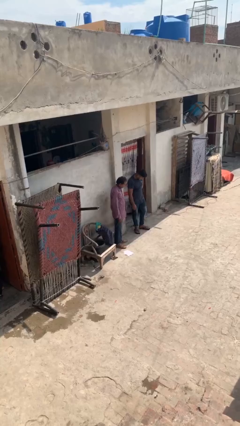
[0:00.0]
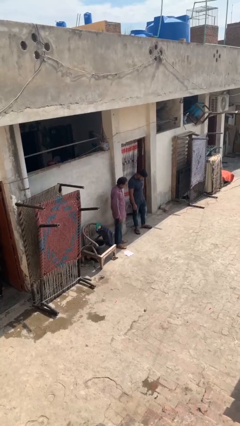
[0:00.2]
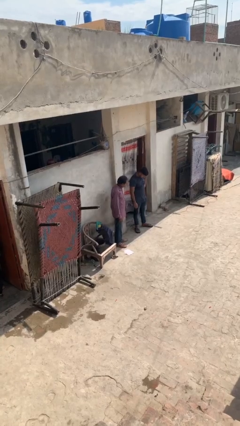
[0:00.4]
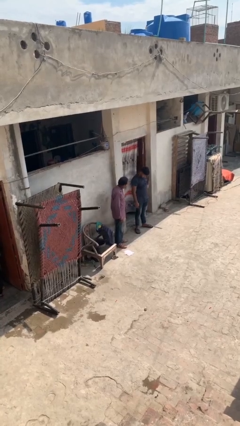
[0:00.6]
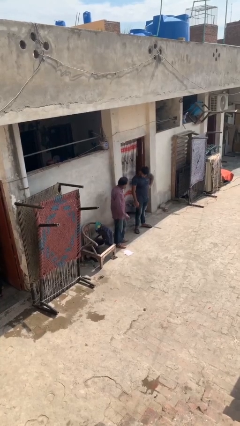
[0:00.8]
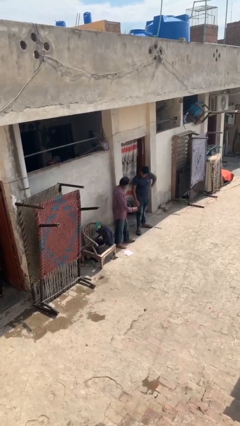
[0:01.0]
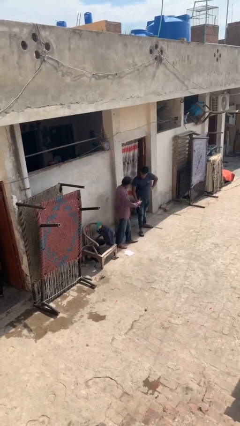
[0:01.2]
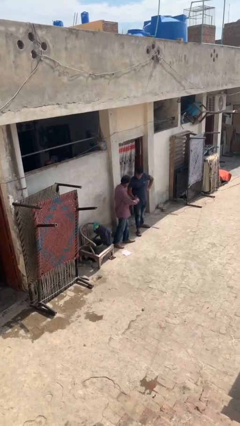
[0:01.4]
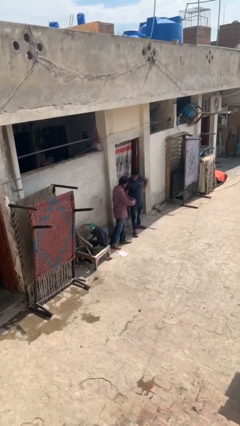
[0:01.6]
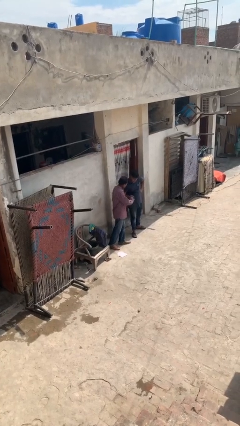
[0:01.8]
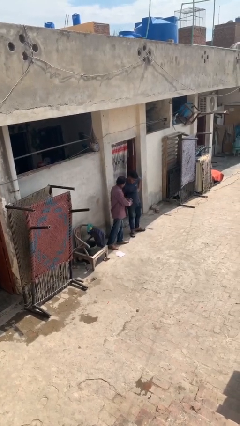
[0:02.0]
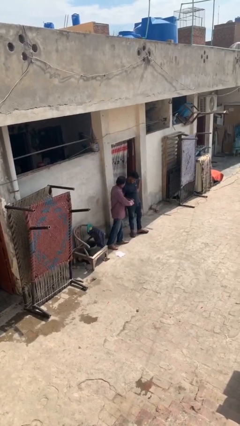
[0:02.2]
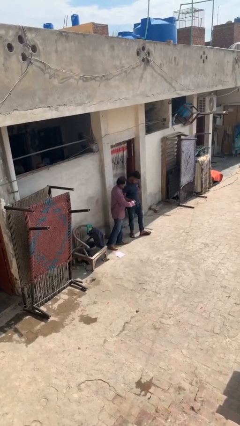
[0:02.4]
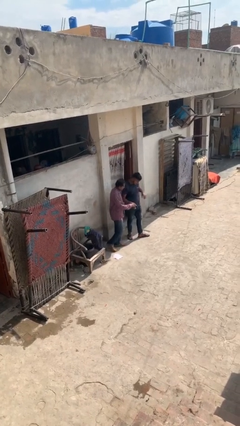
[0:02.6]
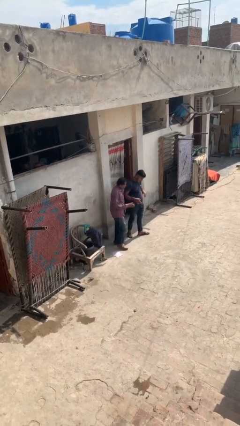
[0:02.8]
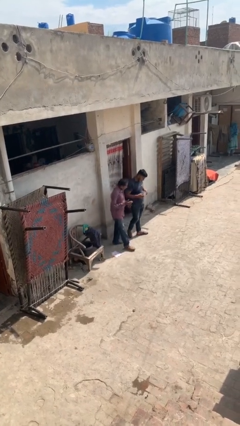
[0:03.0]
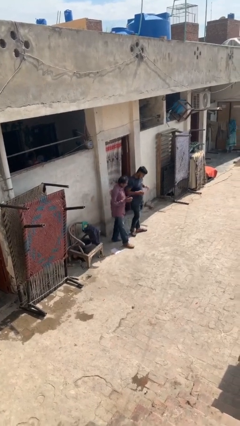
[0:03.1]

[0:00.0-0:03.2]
person shakes hand

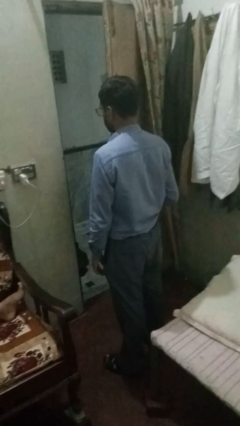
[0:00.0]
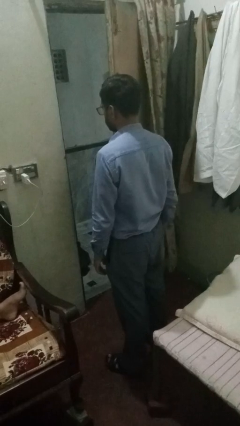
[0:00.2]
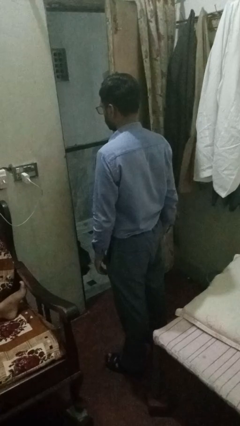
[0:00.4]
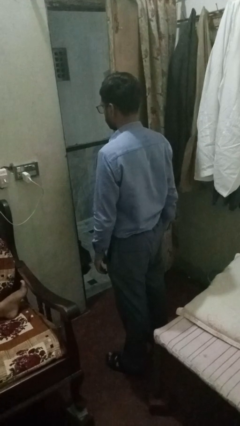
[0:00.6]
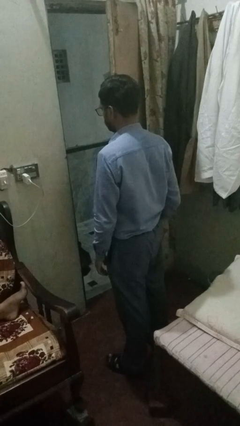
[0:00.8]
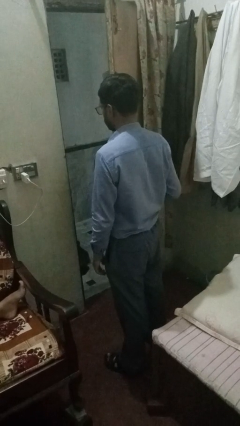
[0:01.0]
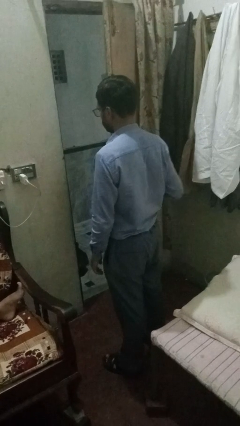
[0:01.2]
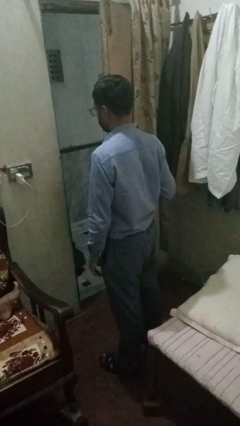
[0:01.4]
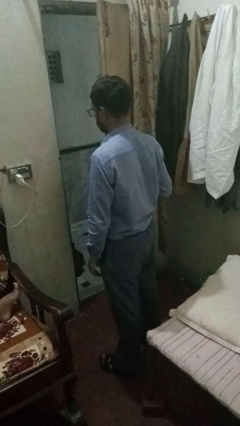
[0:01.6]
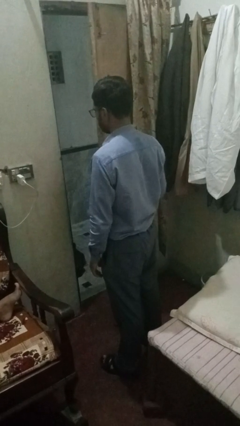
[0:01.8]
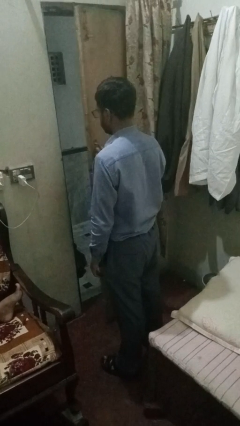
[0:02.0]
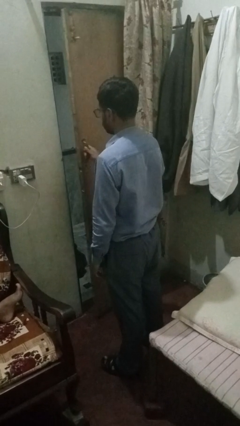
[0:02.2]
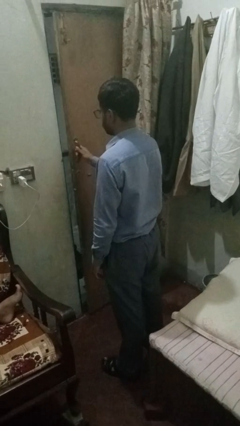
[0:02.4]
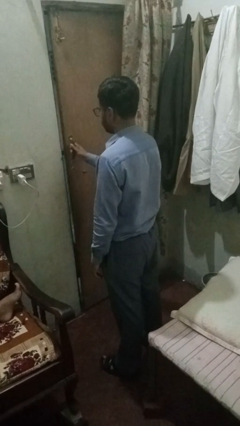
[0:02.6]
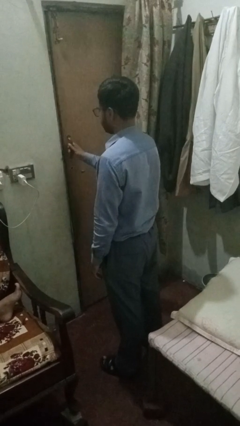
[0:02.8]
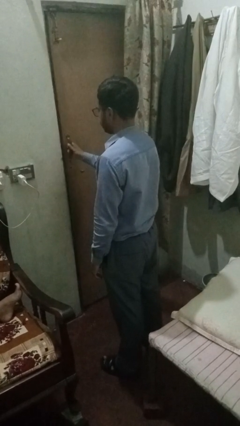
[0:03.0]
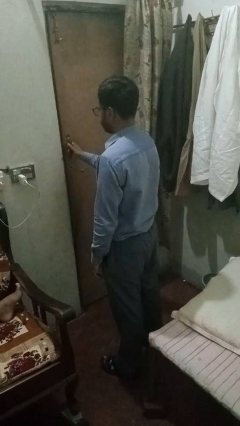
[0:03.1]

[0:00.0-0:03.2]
person closes sliding door

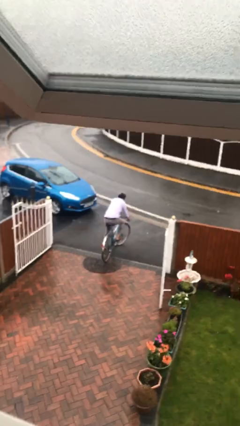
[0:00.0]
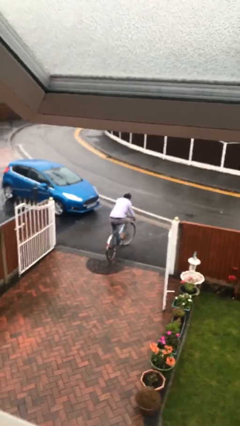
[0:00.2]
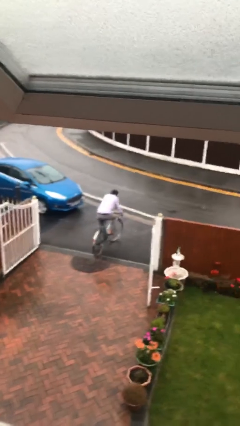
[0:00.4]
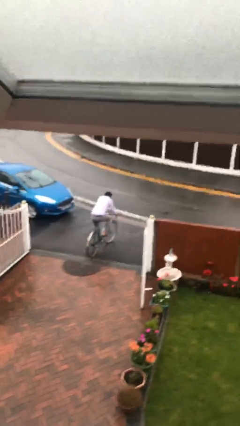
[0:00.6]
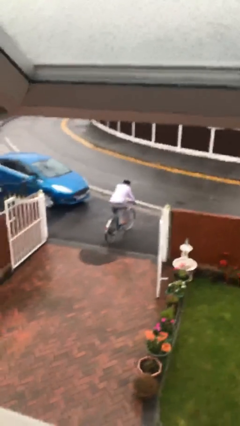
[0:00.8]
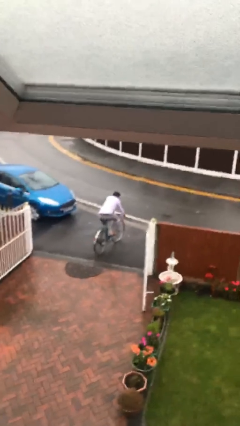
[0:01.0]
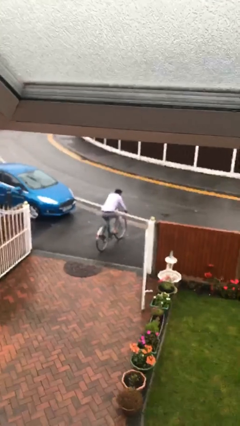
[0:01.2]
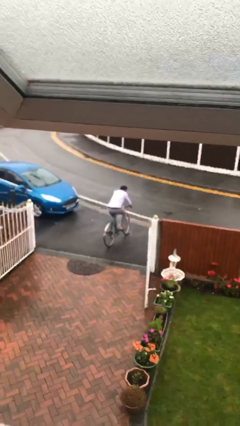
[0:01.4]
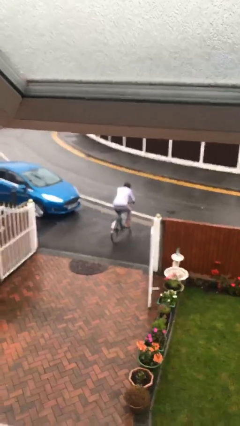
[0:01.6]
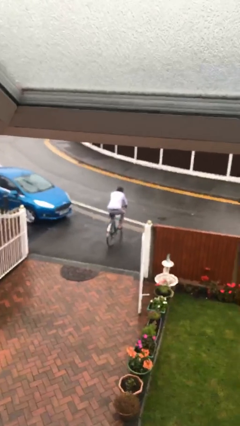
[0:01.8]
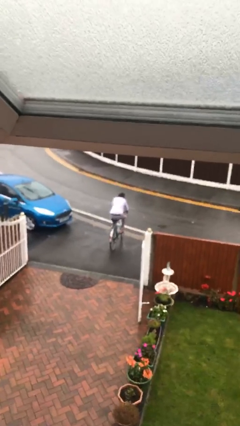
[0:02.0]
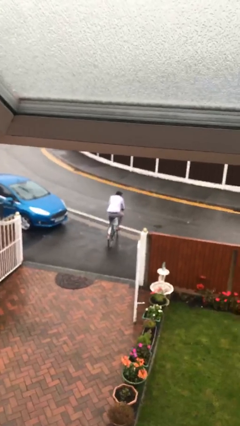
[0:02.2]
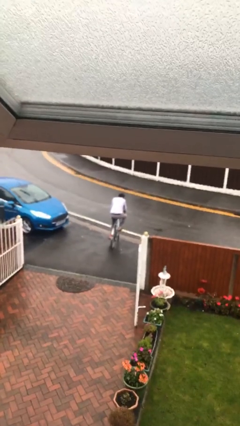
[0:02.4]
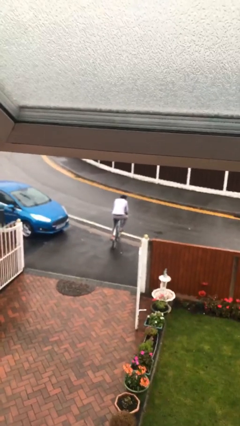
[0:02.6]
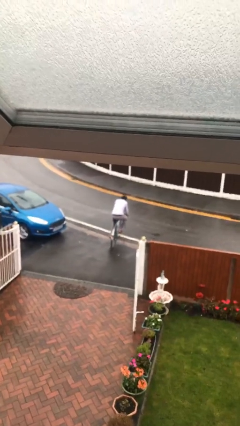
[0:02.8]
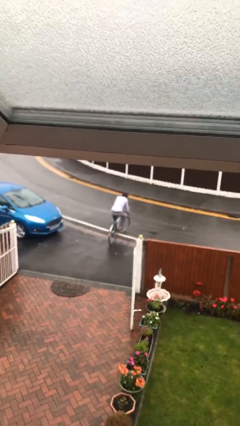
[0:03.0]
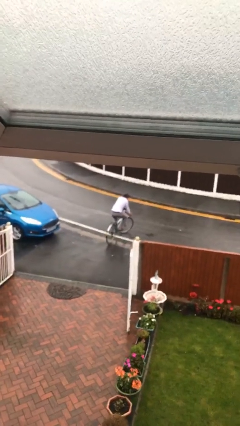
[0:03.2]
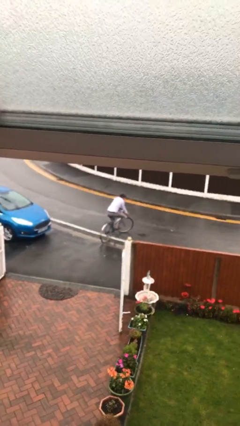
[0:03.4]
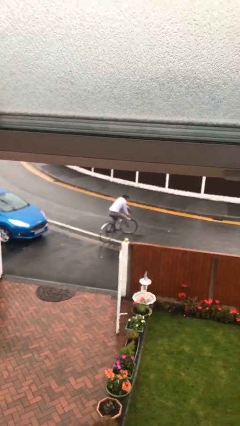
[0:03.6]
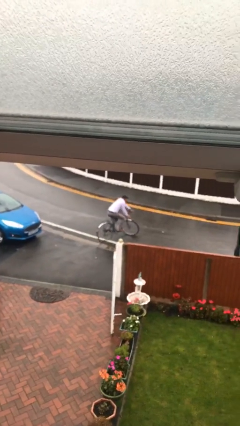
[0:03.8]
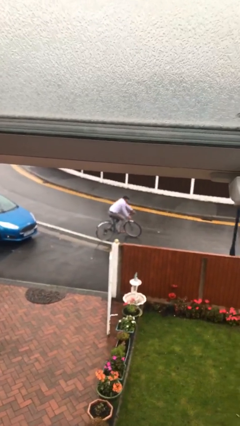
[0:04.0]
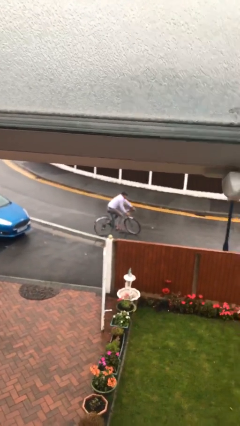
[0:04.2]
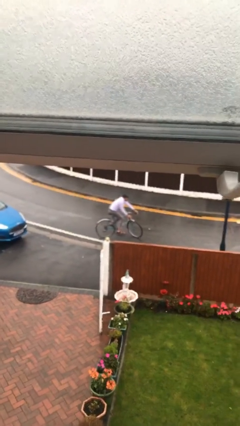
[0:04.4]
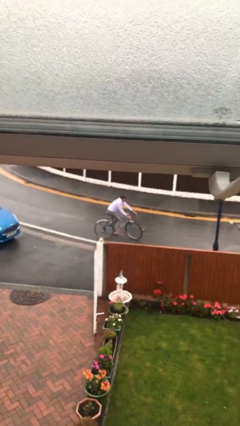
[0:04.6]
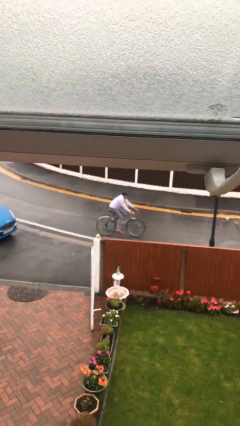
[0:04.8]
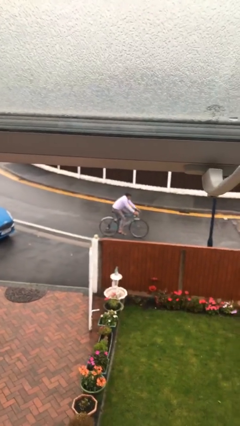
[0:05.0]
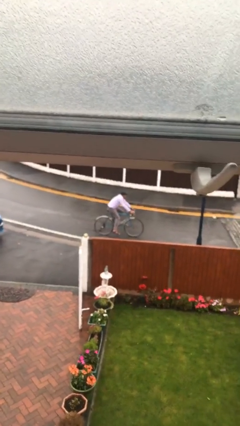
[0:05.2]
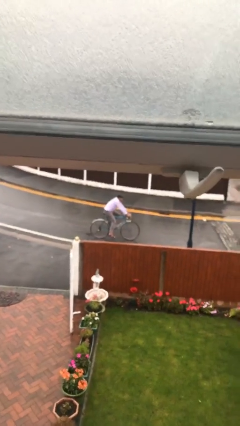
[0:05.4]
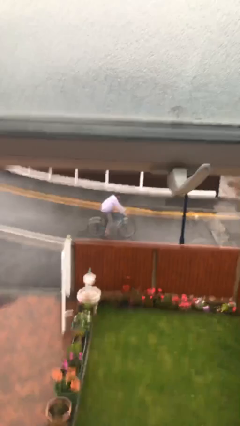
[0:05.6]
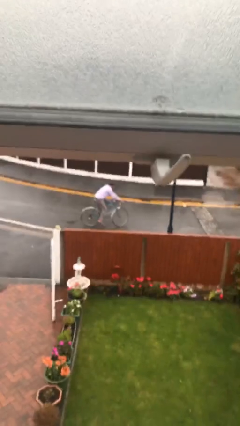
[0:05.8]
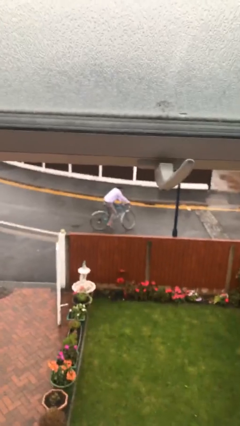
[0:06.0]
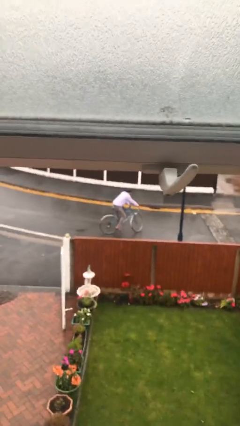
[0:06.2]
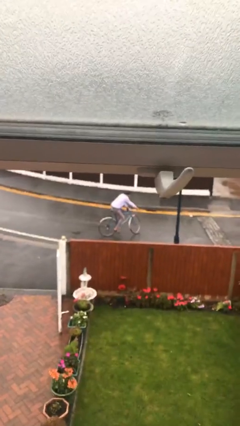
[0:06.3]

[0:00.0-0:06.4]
person rides bicycle

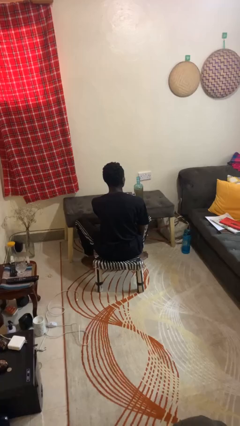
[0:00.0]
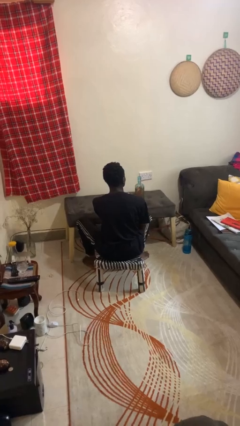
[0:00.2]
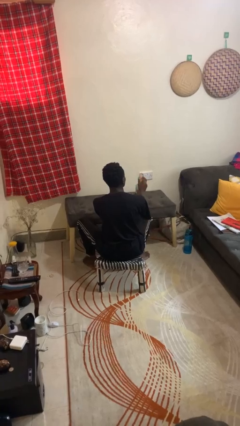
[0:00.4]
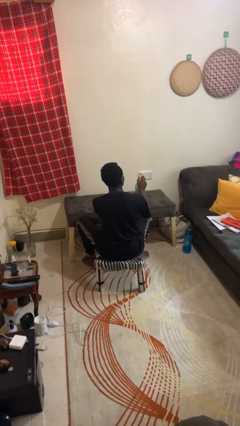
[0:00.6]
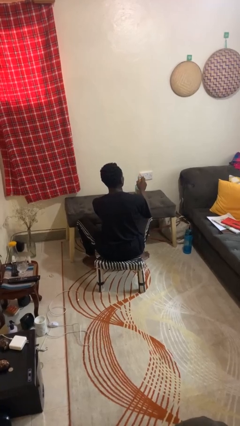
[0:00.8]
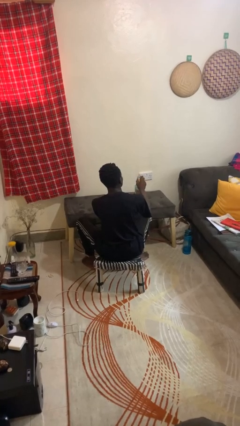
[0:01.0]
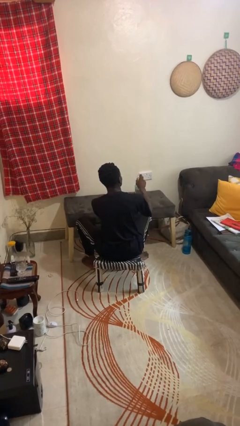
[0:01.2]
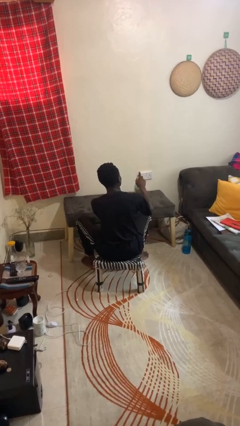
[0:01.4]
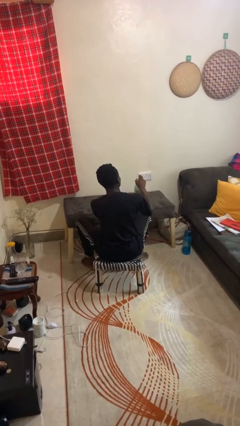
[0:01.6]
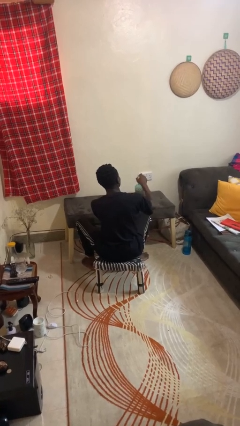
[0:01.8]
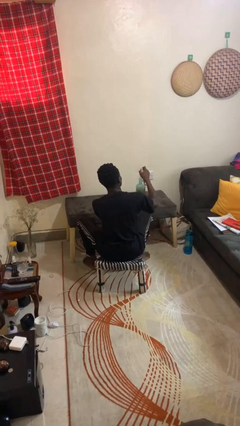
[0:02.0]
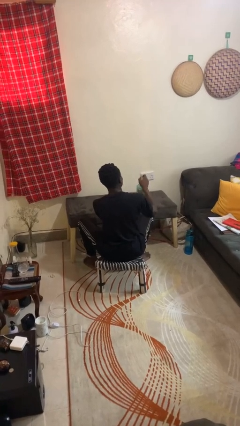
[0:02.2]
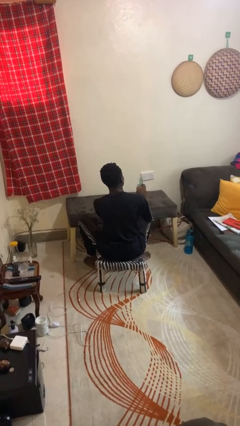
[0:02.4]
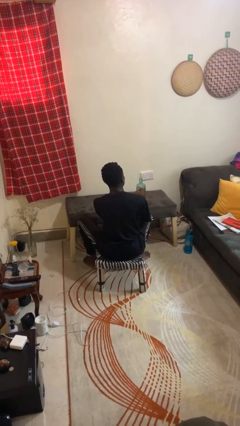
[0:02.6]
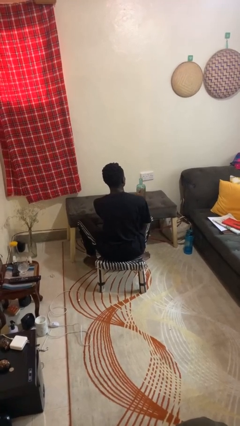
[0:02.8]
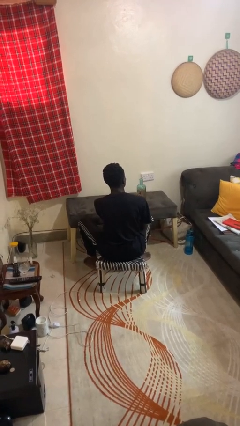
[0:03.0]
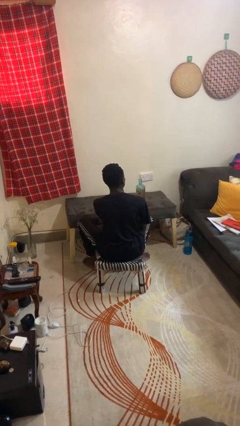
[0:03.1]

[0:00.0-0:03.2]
person opens jar

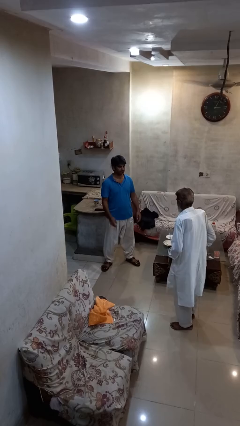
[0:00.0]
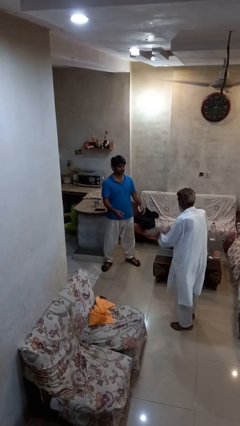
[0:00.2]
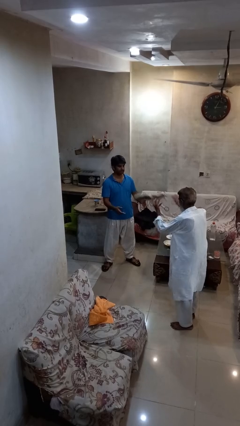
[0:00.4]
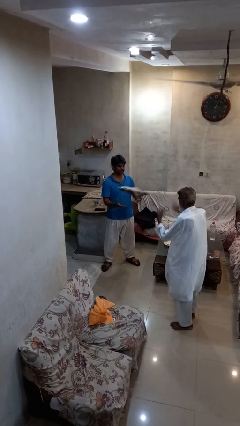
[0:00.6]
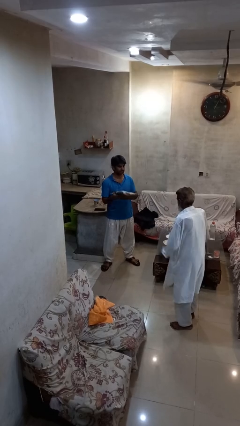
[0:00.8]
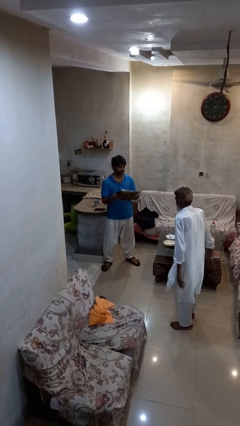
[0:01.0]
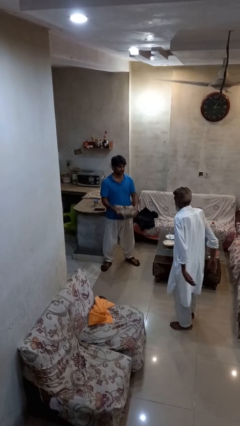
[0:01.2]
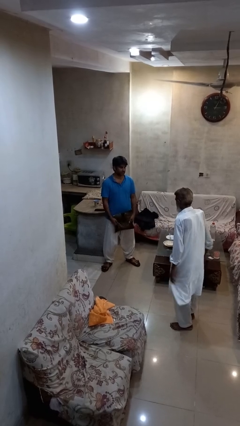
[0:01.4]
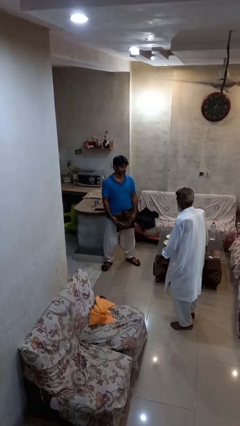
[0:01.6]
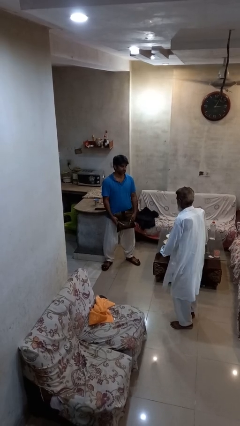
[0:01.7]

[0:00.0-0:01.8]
person catches object from person
